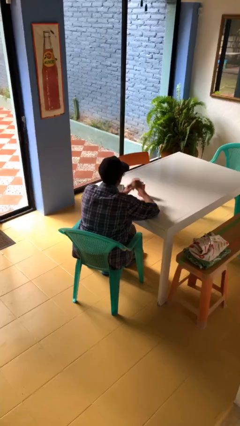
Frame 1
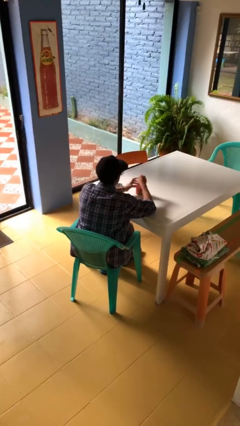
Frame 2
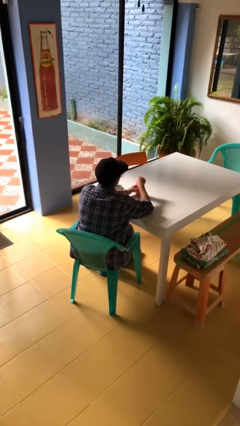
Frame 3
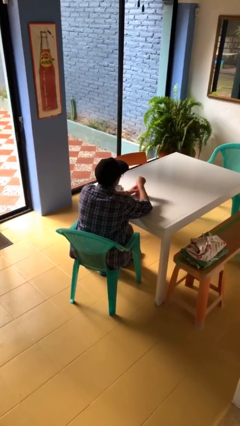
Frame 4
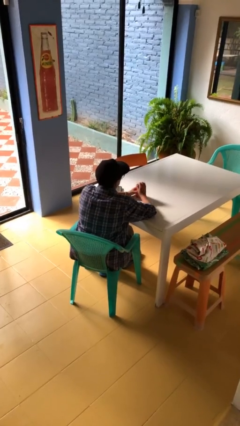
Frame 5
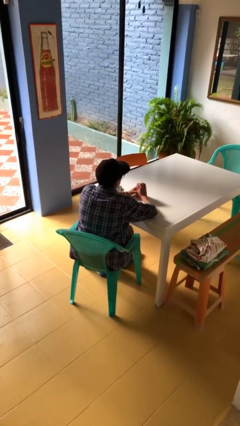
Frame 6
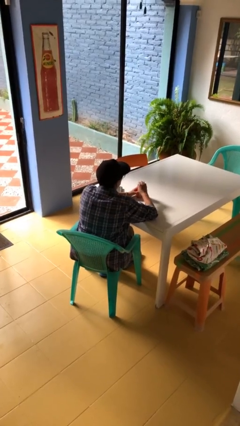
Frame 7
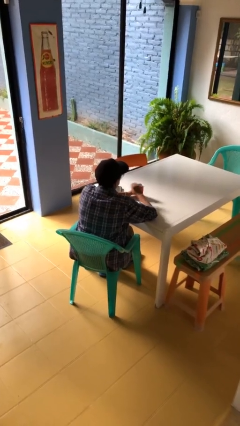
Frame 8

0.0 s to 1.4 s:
person opens beverage can

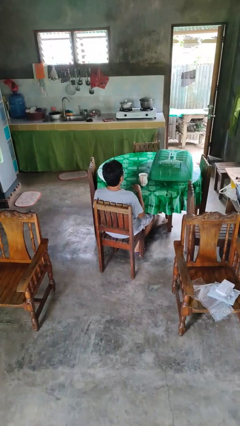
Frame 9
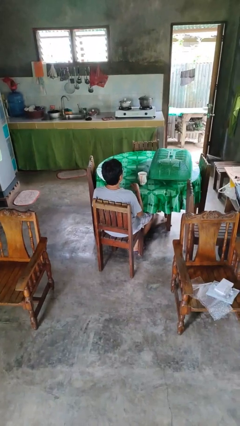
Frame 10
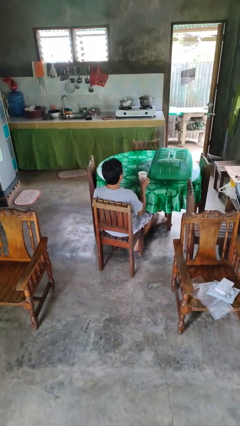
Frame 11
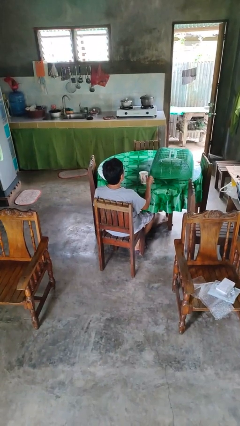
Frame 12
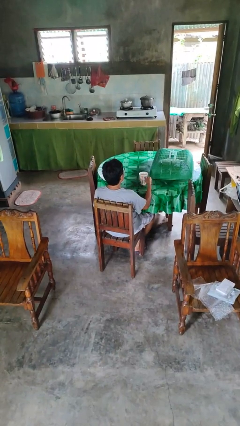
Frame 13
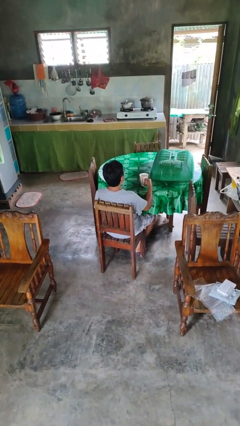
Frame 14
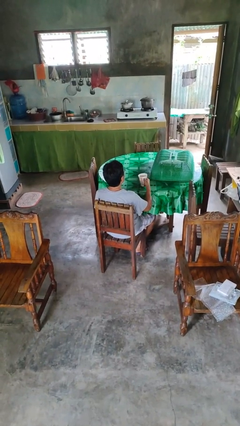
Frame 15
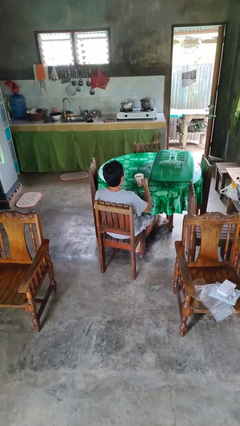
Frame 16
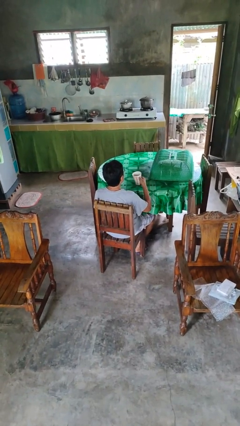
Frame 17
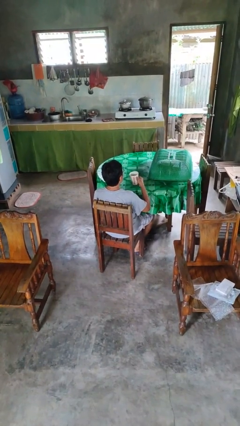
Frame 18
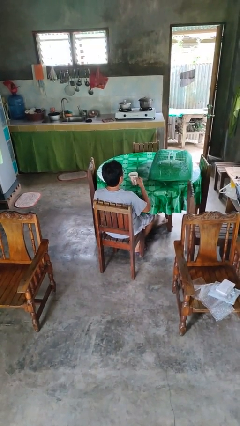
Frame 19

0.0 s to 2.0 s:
person picks up object from table

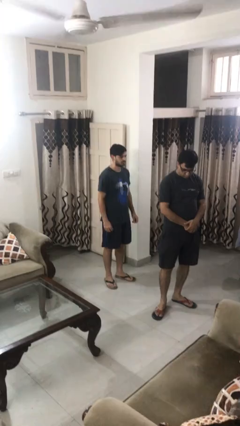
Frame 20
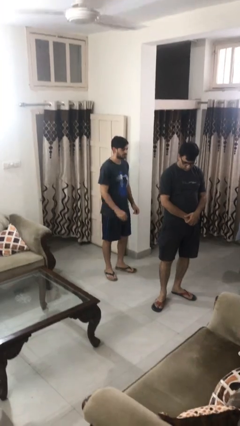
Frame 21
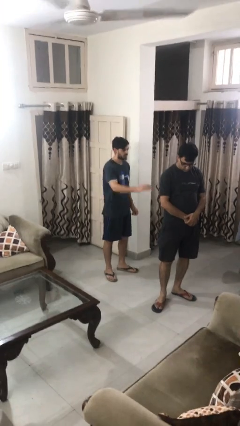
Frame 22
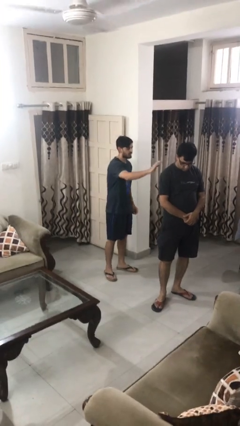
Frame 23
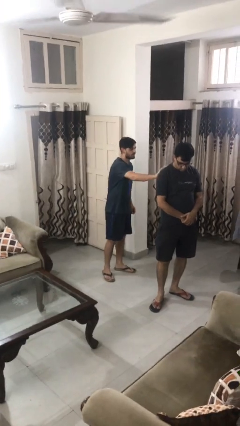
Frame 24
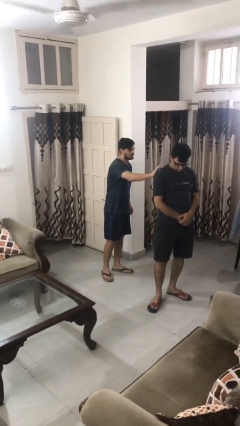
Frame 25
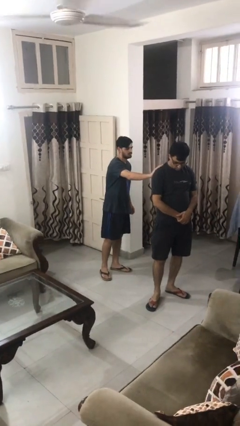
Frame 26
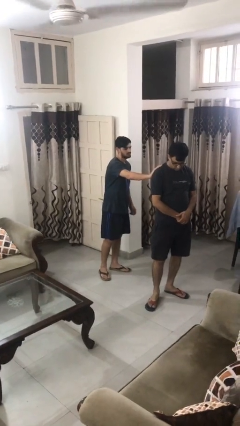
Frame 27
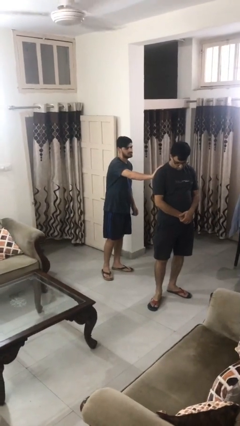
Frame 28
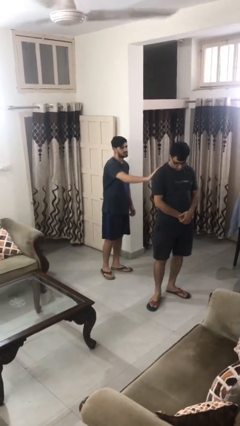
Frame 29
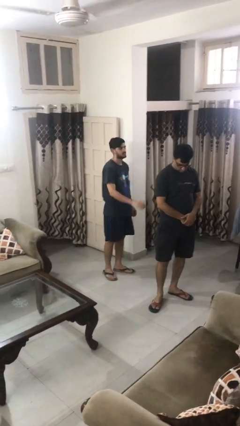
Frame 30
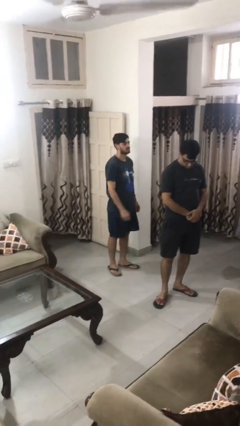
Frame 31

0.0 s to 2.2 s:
person touches back of person

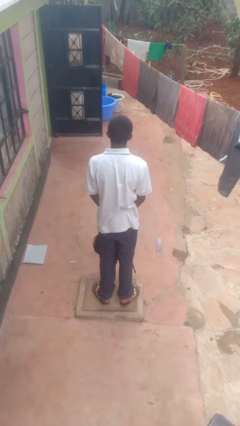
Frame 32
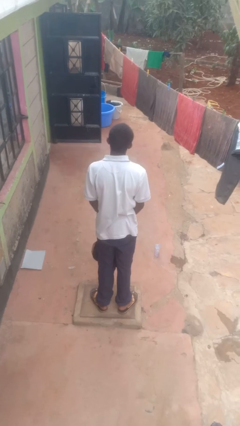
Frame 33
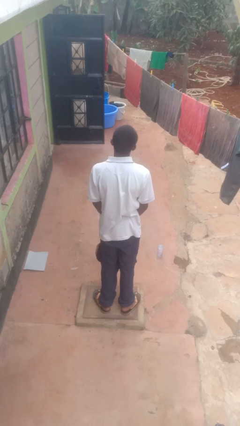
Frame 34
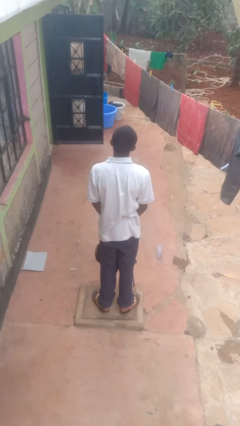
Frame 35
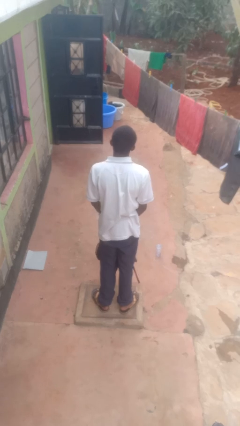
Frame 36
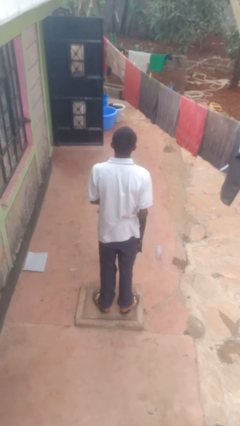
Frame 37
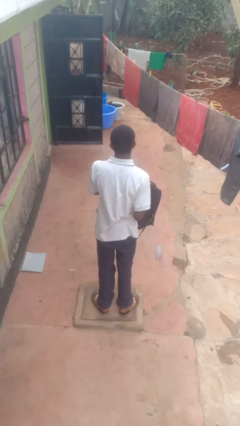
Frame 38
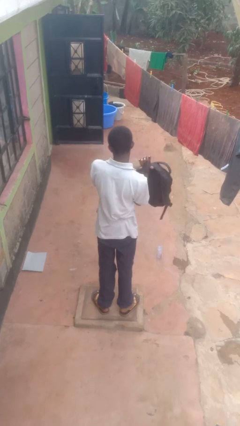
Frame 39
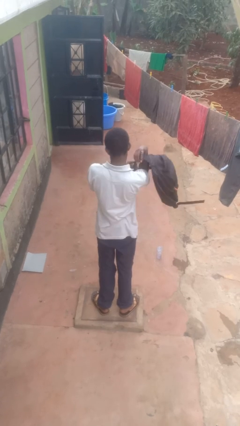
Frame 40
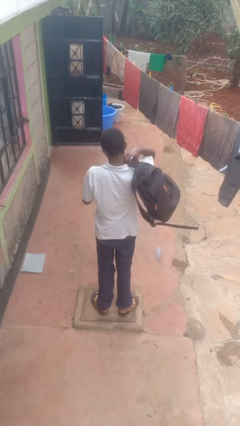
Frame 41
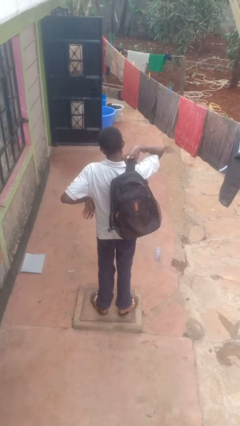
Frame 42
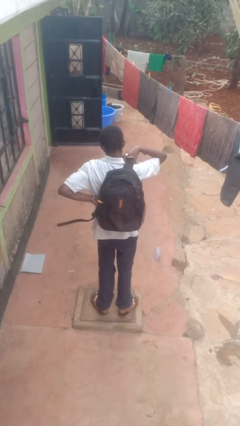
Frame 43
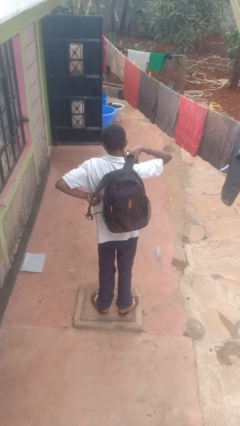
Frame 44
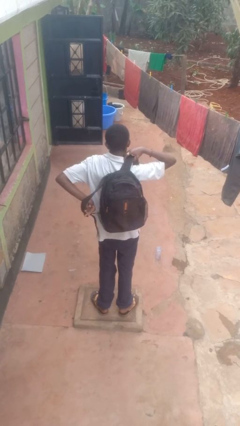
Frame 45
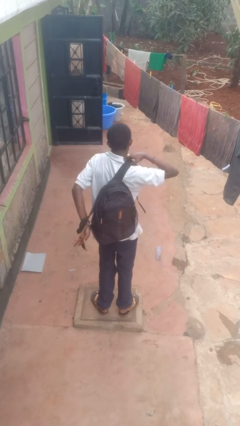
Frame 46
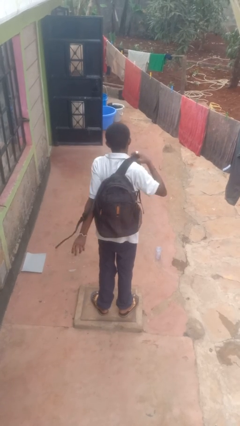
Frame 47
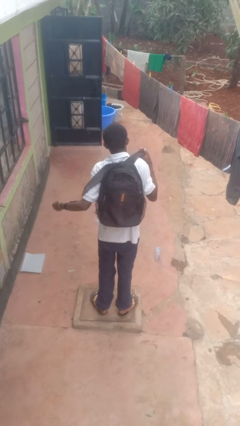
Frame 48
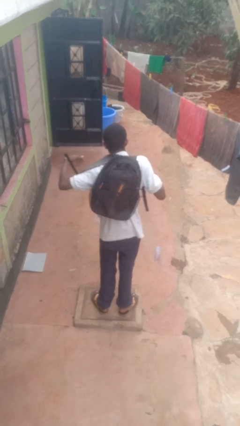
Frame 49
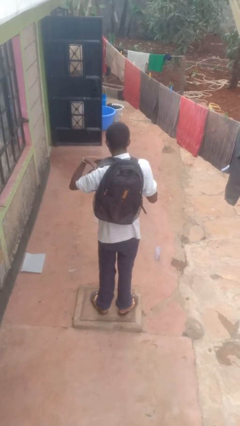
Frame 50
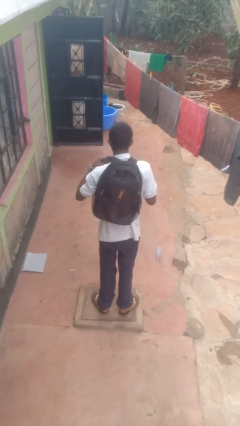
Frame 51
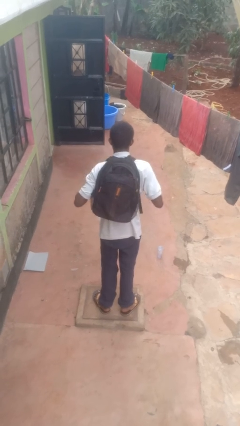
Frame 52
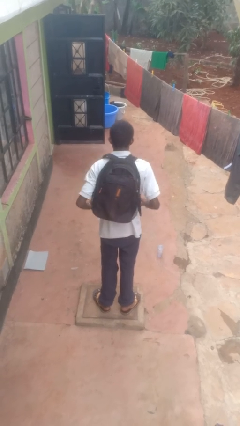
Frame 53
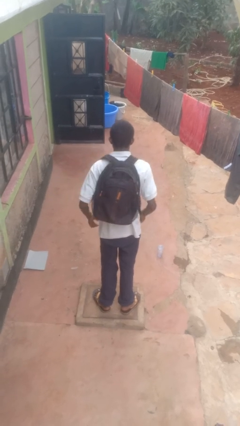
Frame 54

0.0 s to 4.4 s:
person puts on backpack

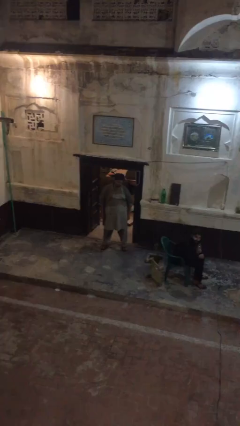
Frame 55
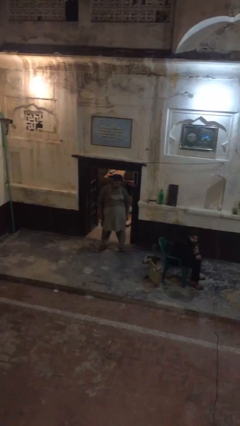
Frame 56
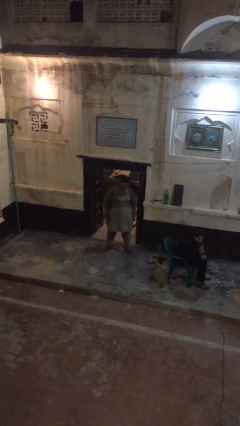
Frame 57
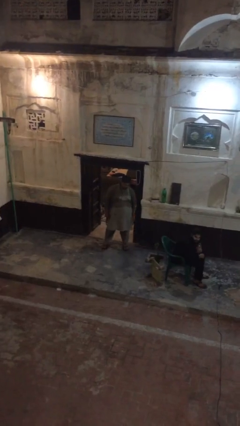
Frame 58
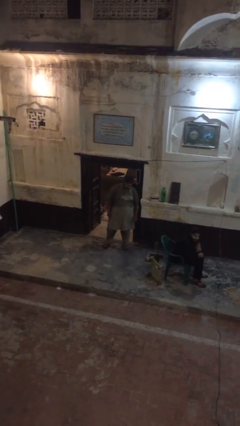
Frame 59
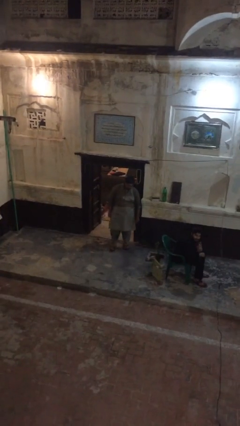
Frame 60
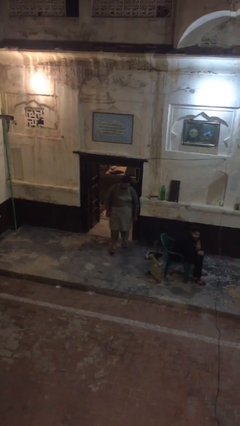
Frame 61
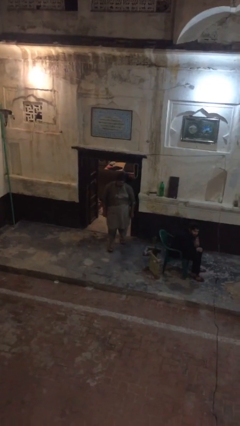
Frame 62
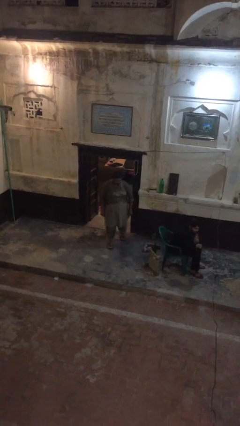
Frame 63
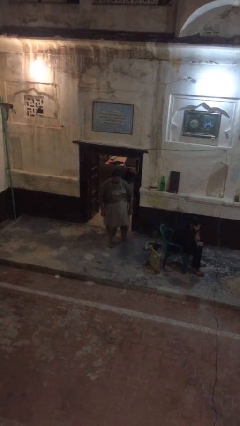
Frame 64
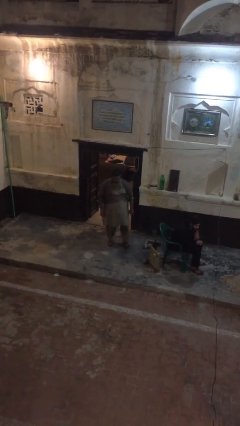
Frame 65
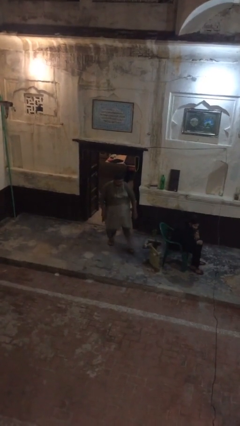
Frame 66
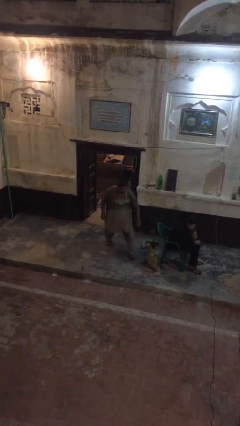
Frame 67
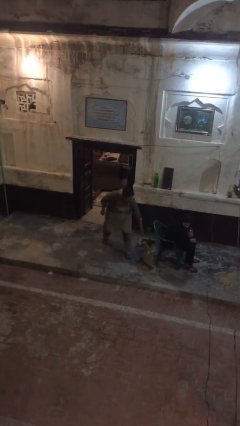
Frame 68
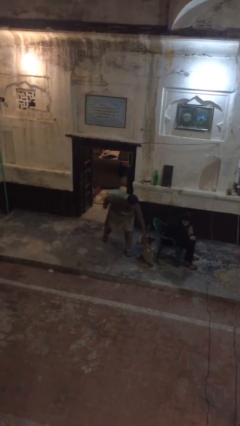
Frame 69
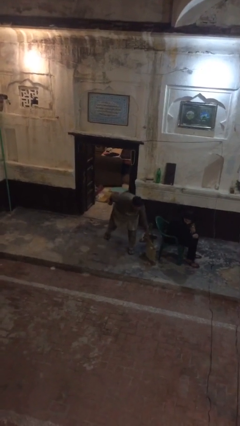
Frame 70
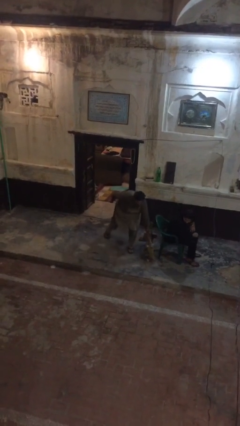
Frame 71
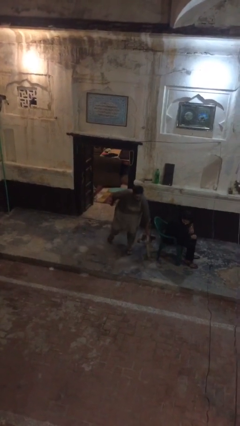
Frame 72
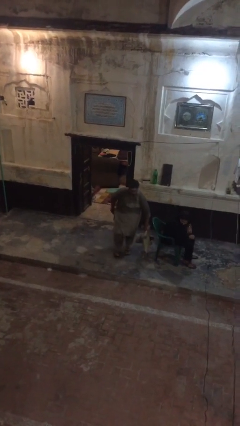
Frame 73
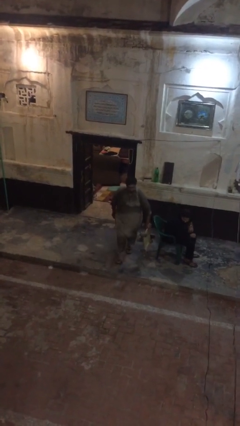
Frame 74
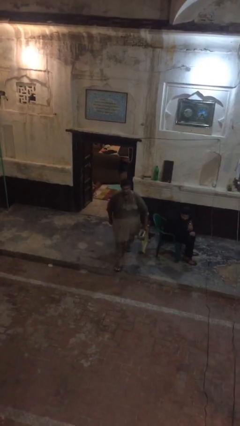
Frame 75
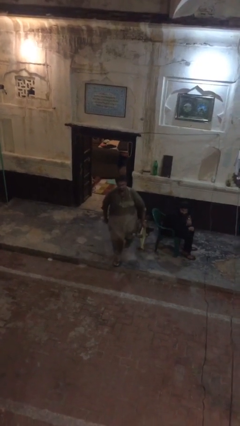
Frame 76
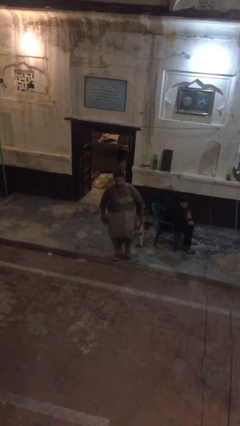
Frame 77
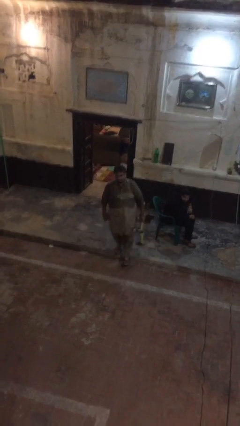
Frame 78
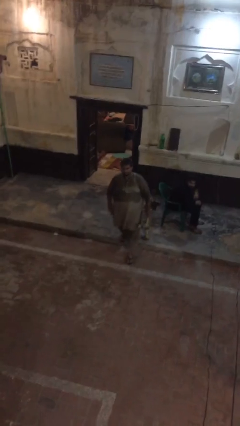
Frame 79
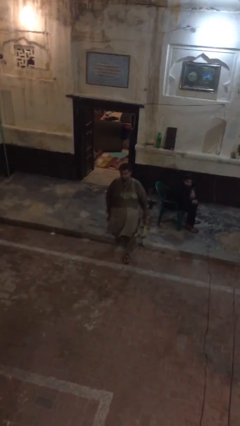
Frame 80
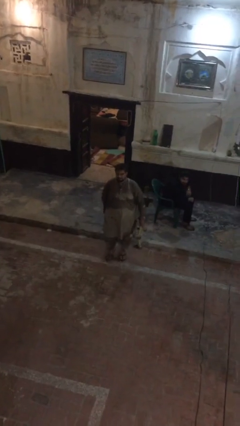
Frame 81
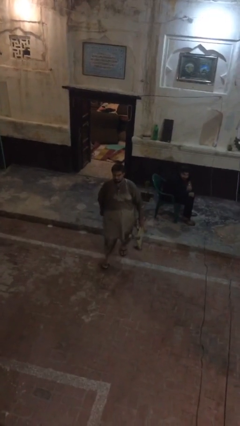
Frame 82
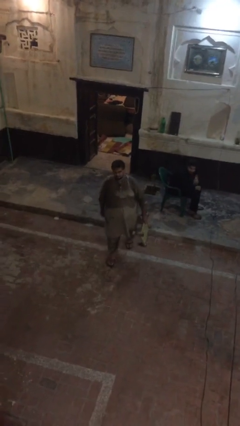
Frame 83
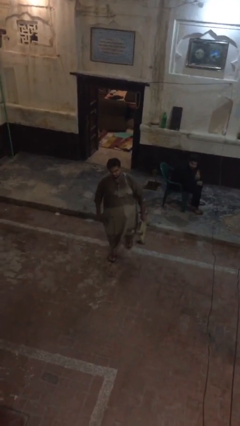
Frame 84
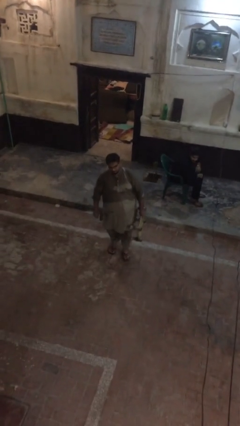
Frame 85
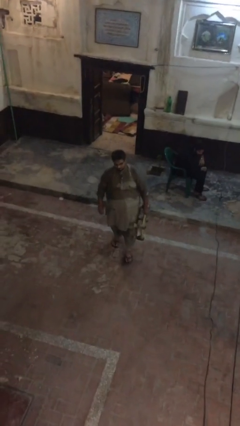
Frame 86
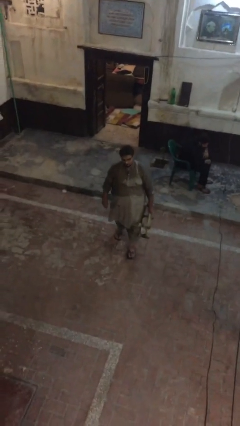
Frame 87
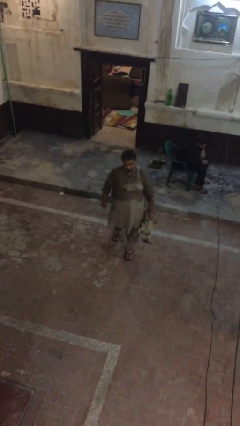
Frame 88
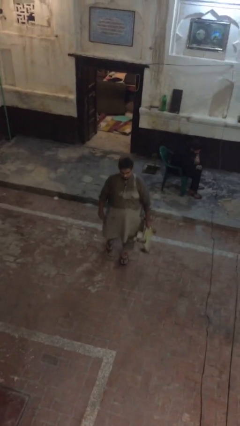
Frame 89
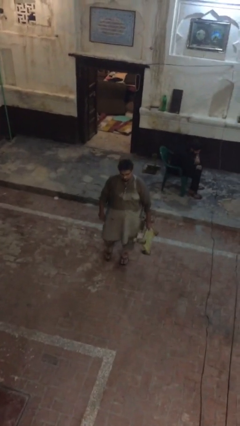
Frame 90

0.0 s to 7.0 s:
person steals object from person

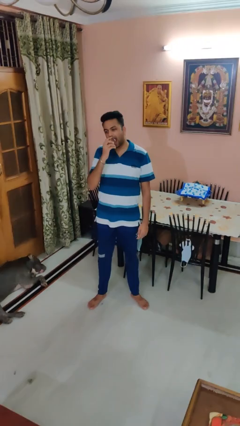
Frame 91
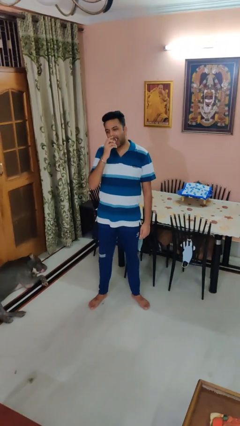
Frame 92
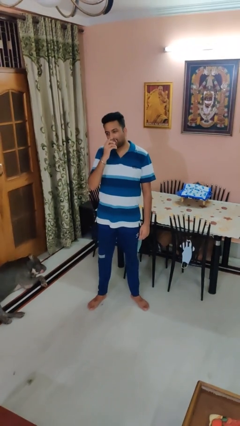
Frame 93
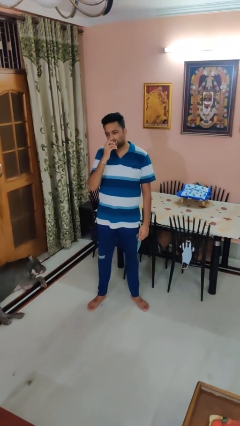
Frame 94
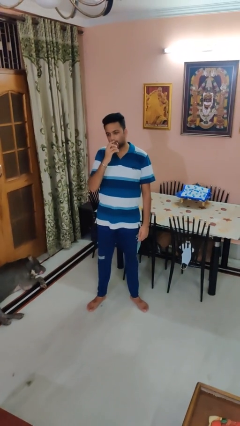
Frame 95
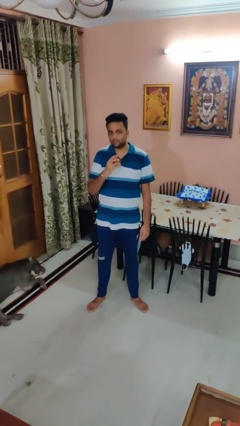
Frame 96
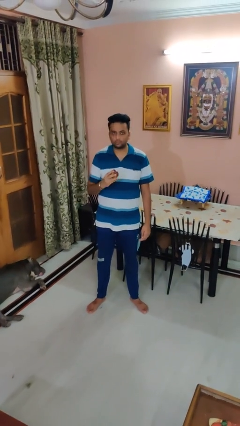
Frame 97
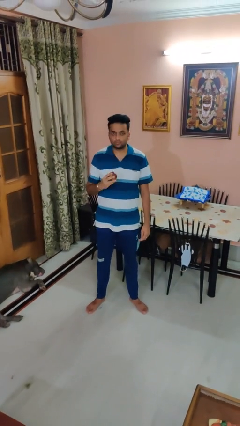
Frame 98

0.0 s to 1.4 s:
person eats apple
